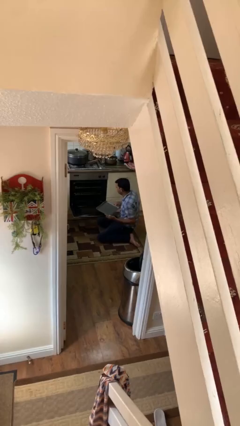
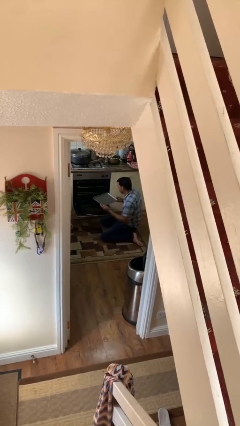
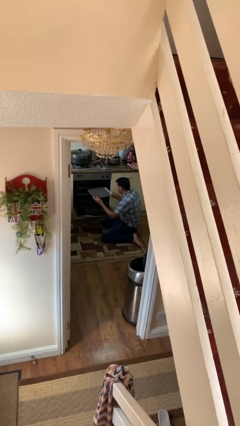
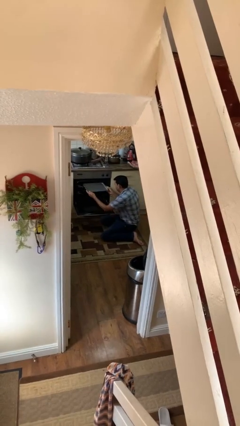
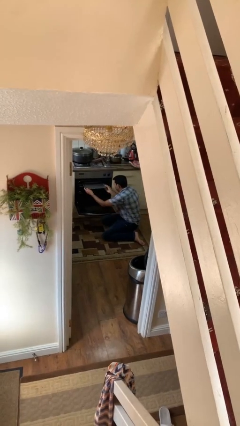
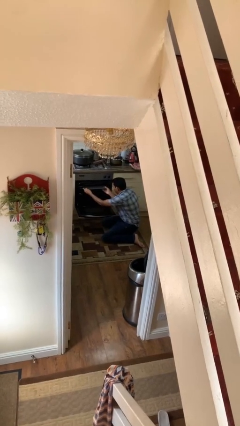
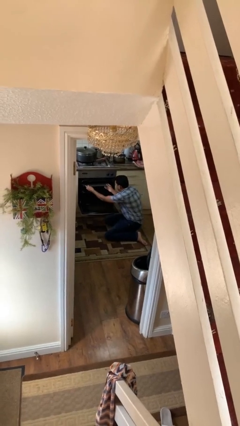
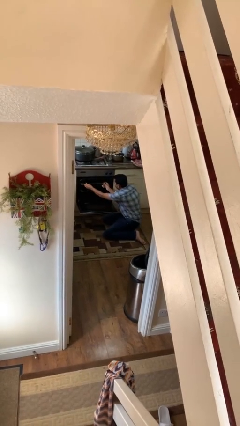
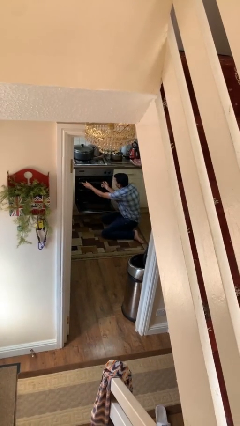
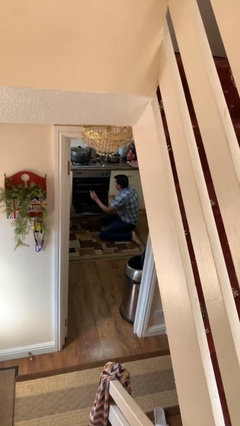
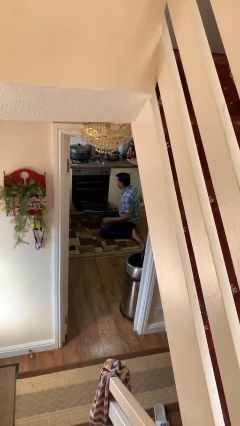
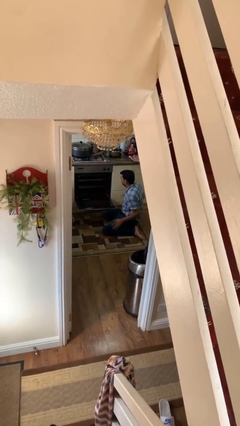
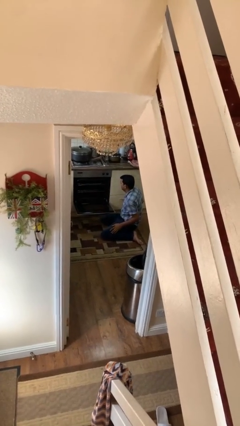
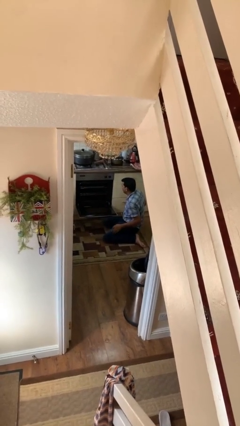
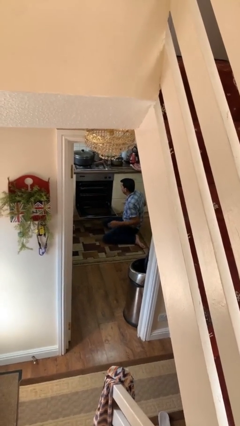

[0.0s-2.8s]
person puts object into oven

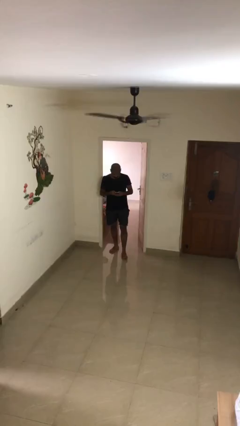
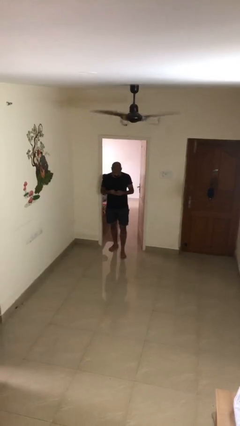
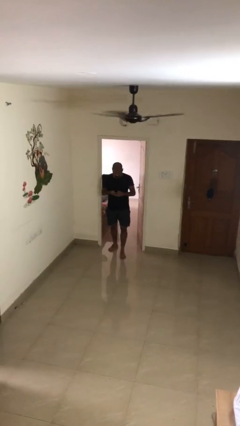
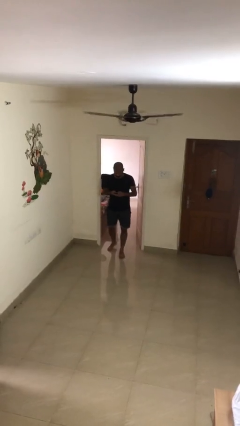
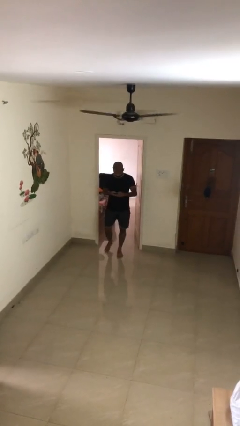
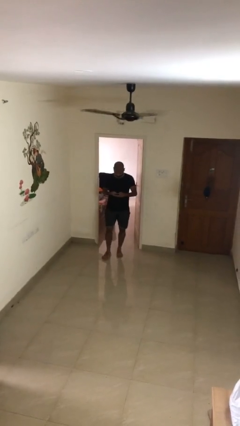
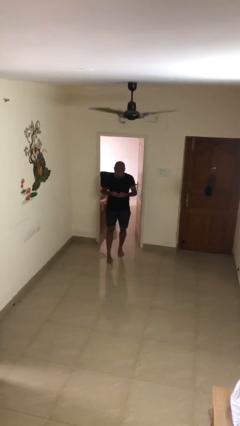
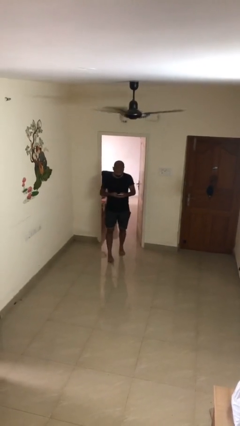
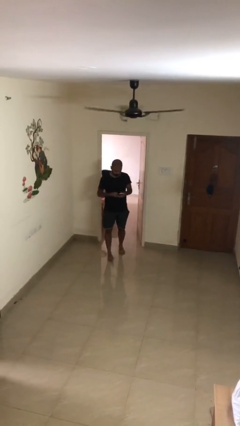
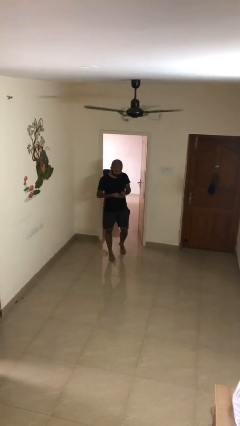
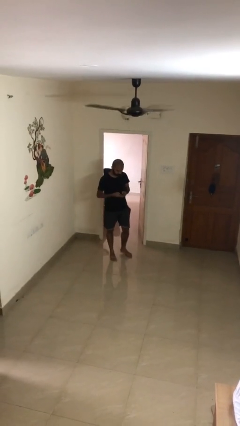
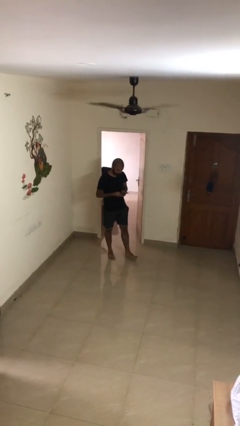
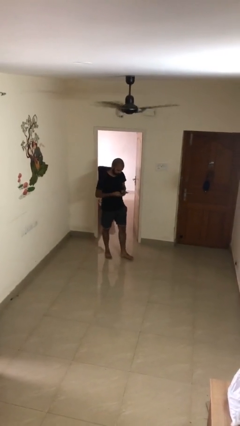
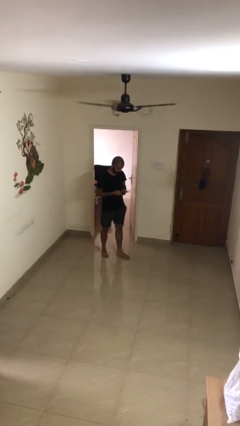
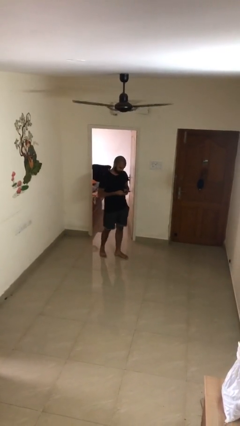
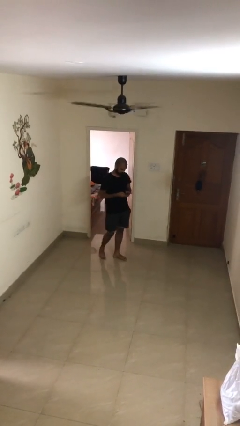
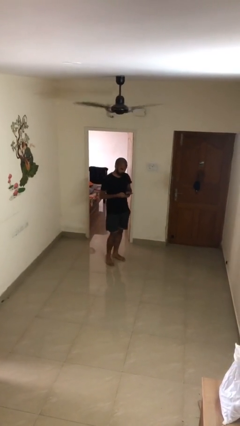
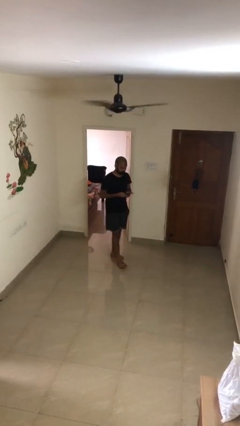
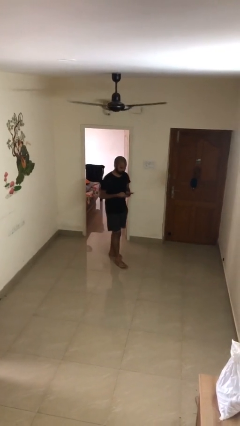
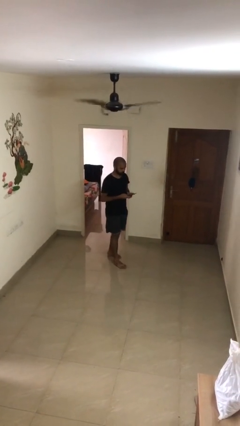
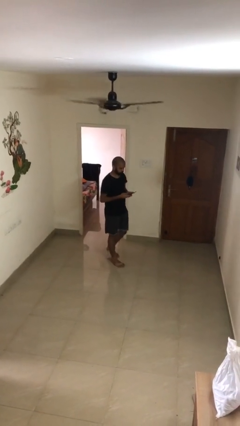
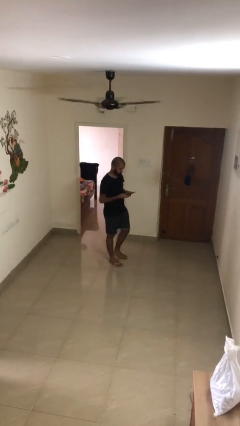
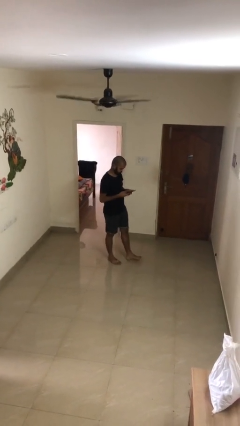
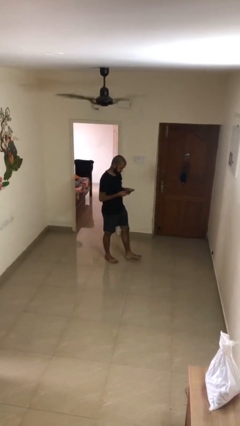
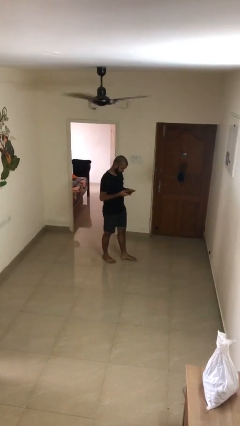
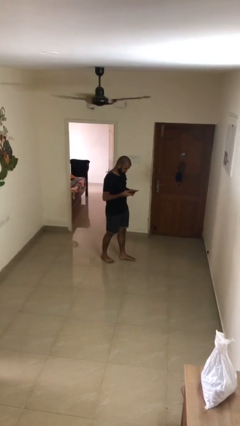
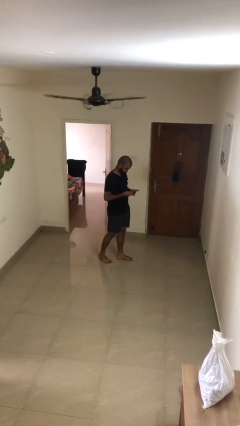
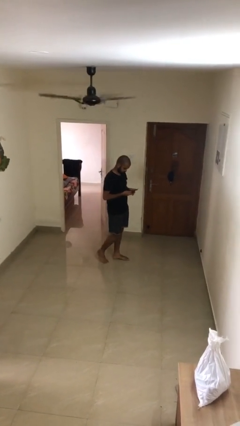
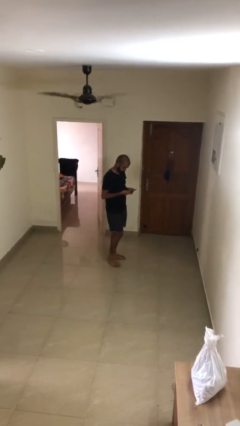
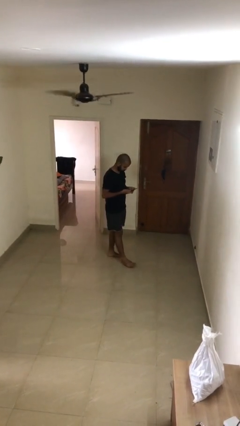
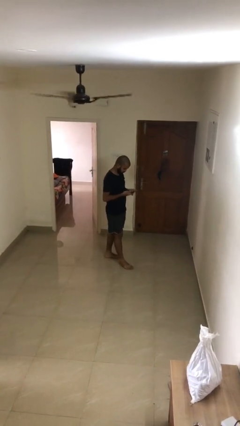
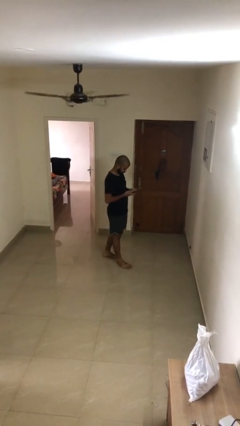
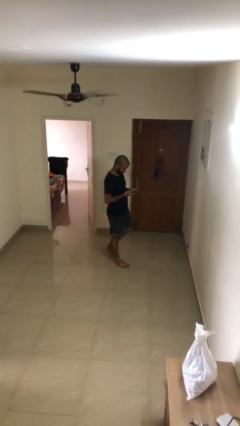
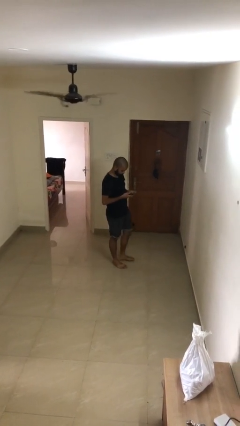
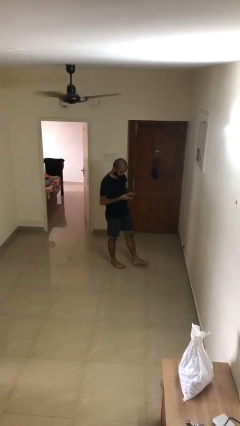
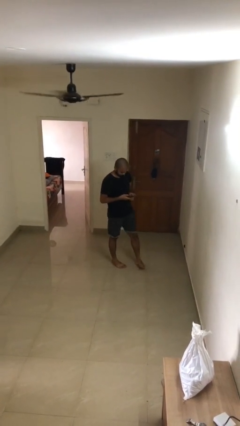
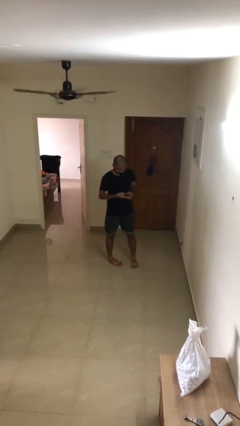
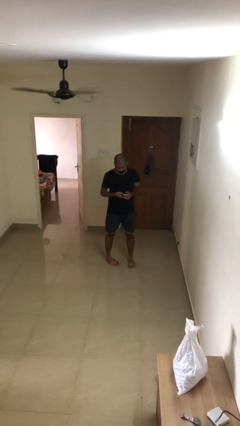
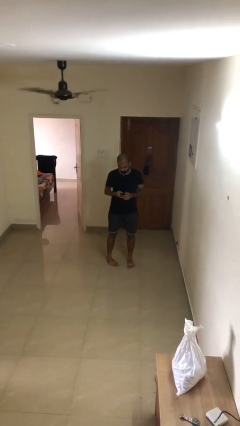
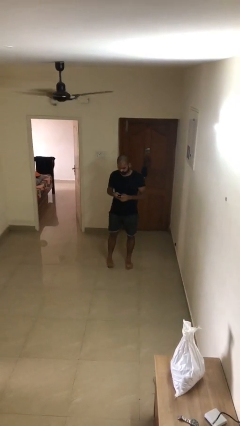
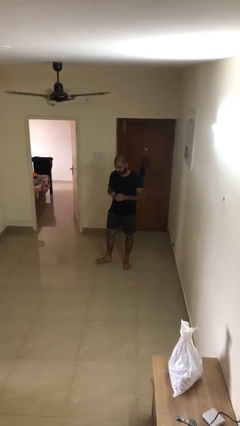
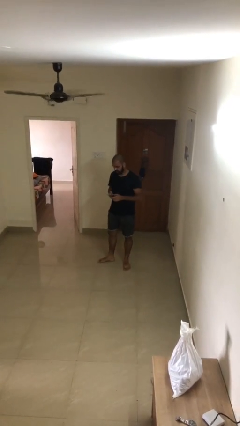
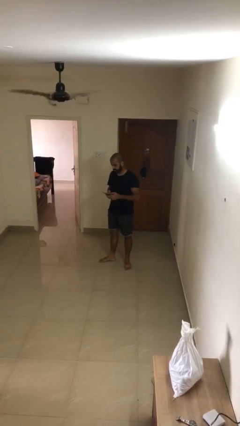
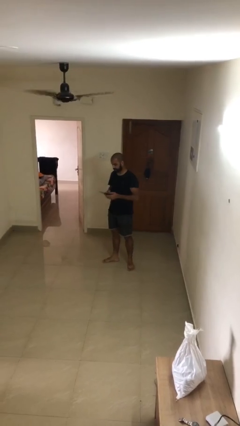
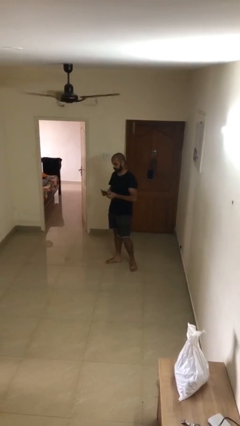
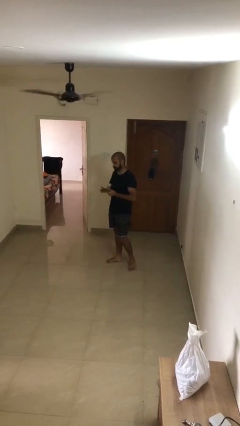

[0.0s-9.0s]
person texts on phone

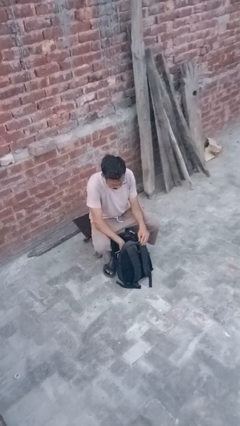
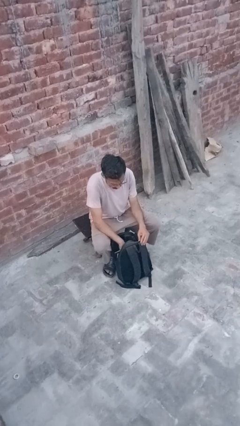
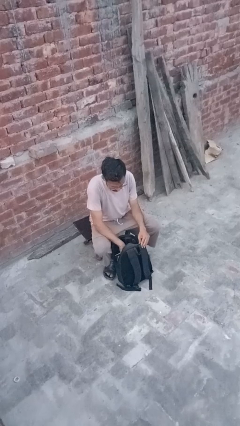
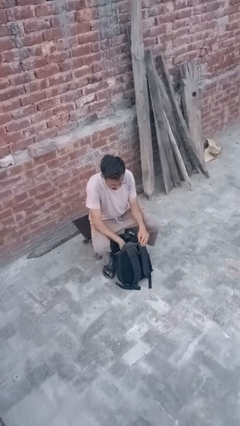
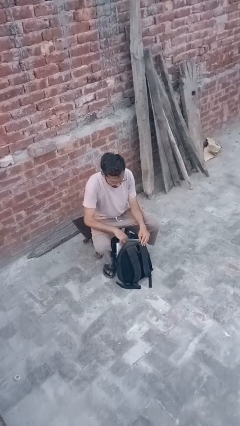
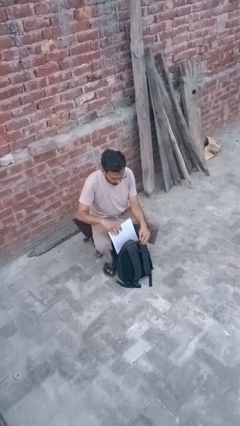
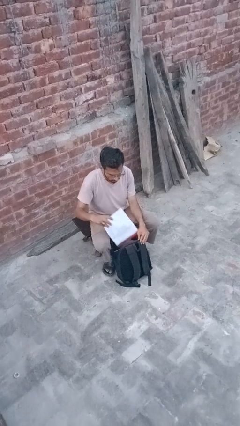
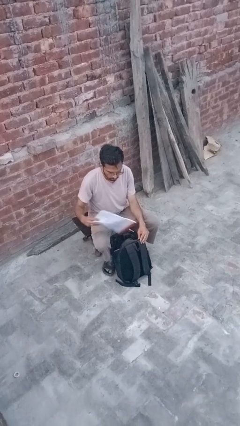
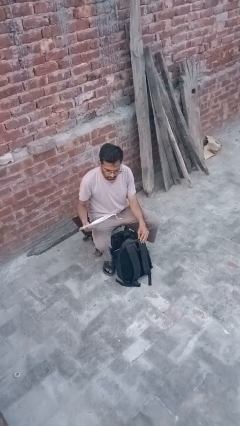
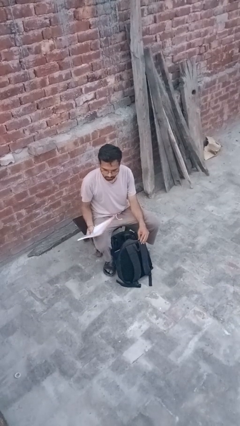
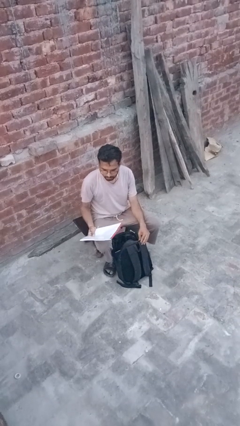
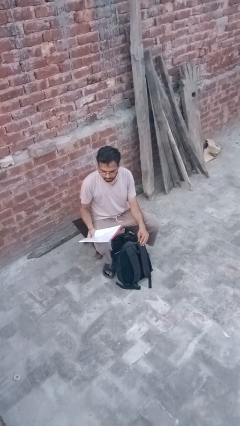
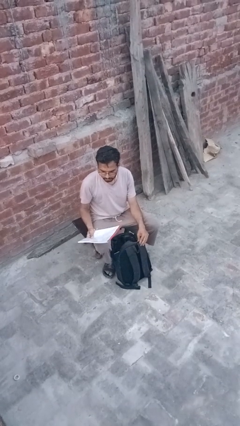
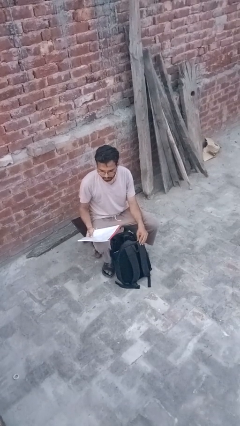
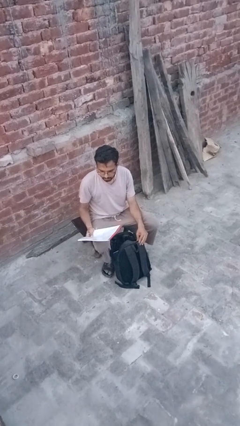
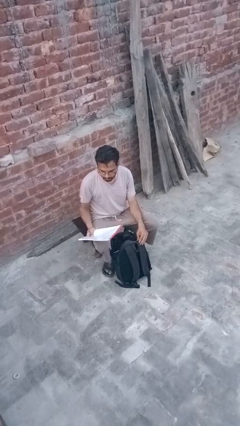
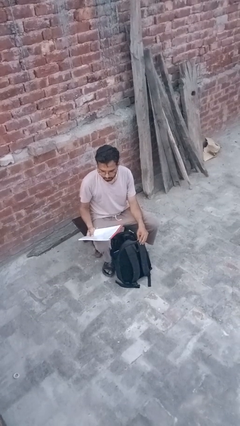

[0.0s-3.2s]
person takes object from backpack

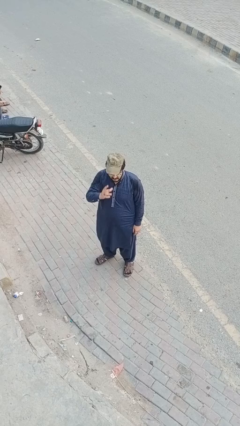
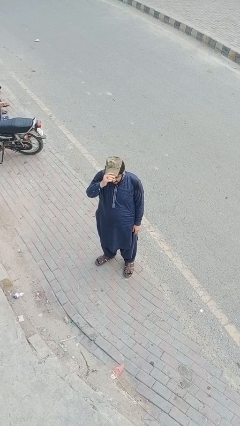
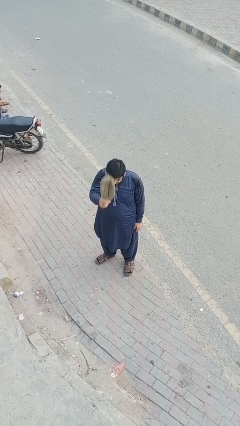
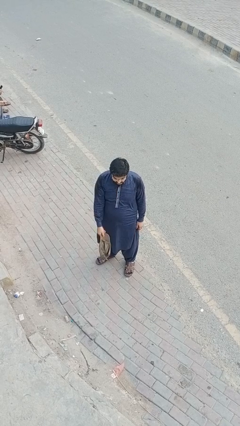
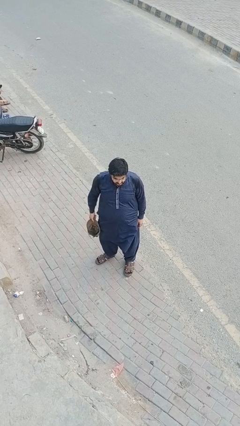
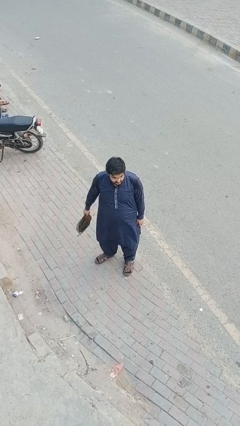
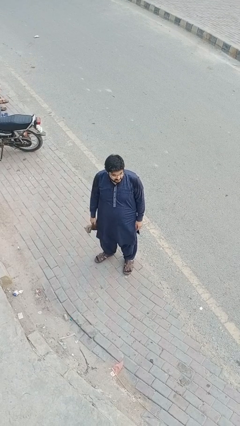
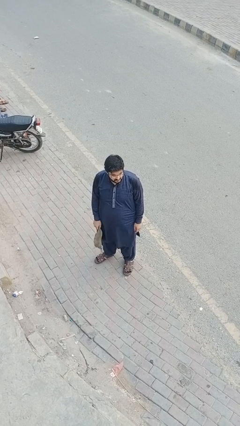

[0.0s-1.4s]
person takes off hat

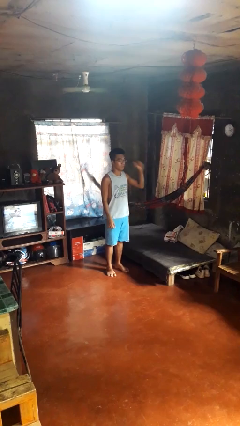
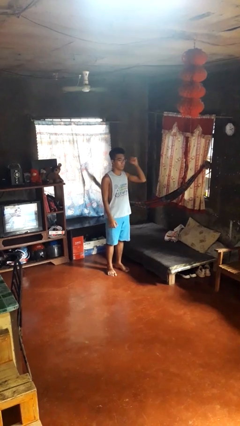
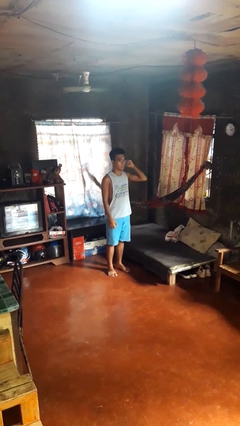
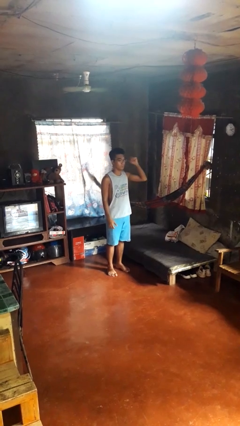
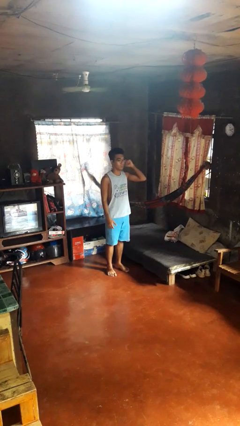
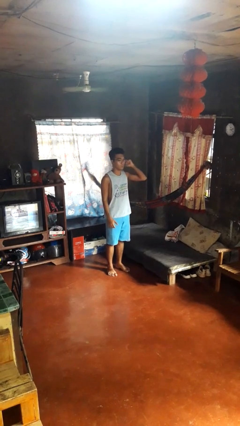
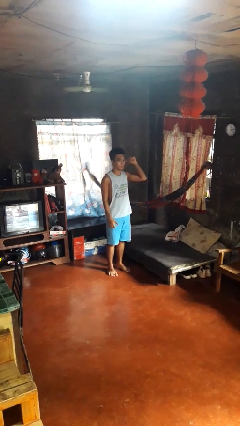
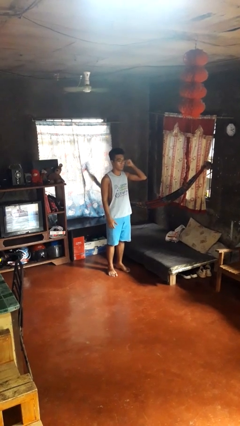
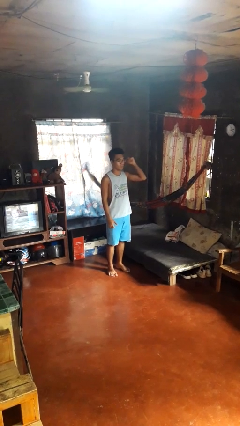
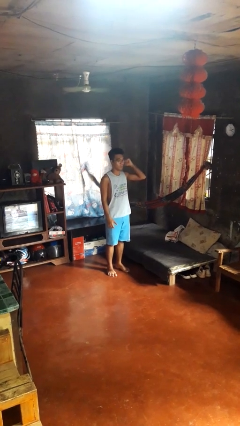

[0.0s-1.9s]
person gestures behind me
